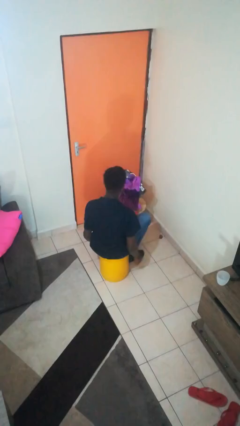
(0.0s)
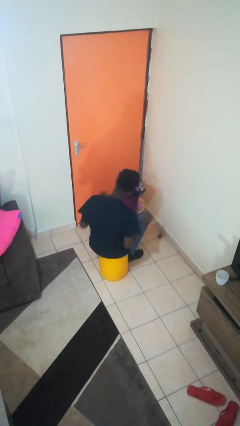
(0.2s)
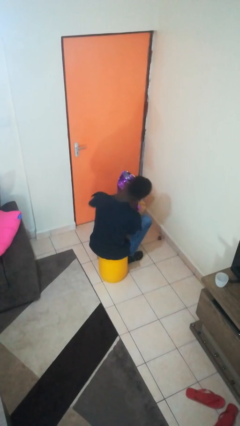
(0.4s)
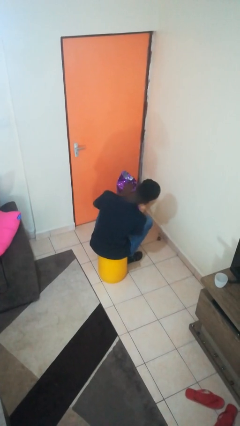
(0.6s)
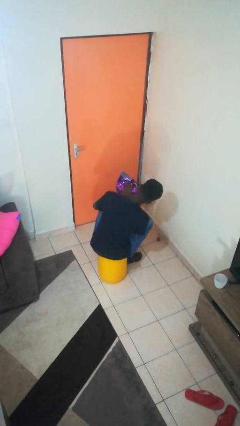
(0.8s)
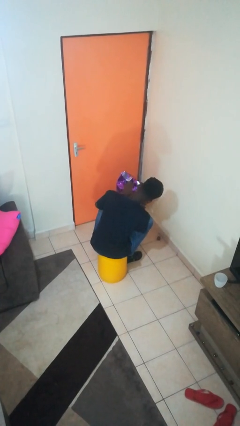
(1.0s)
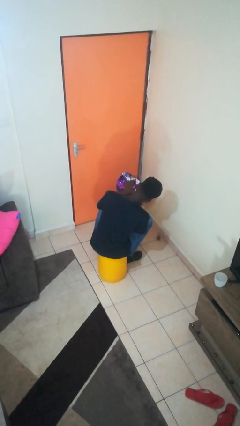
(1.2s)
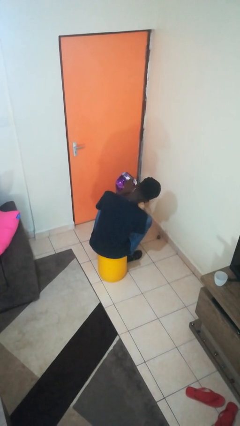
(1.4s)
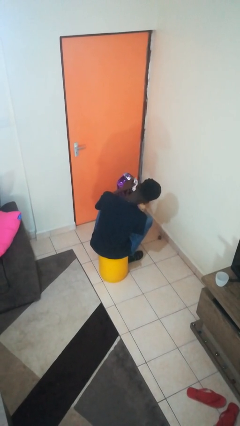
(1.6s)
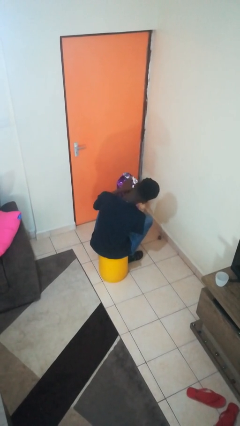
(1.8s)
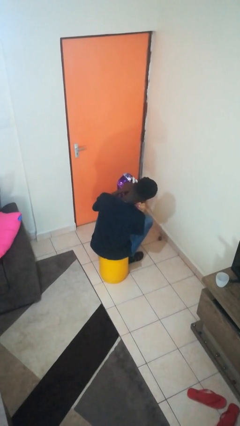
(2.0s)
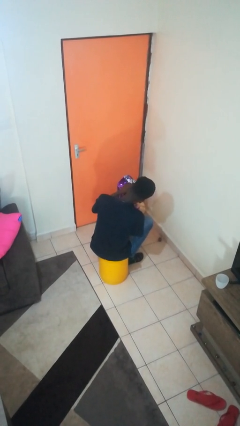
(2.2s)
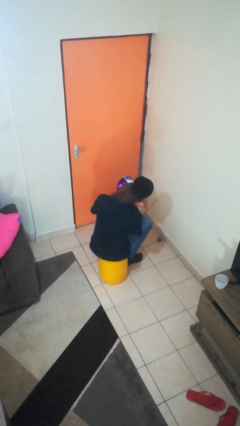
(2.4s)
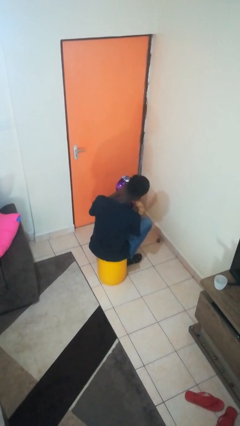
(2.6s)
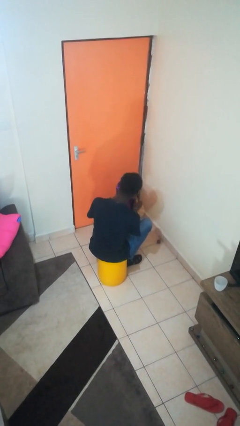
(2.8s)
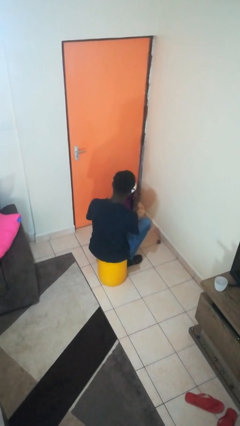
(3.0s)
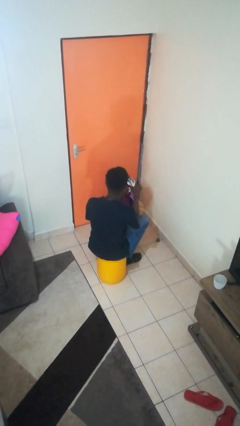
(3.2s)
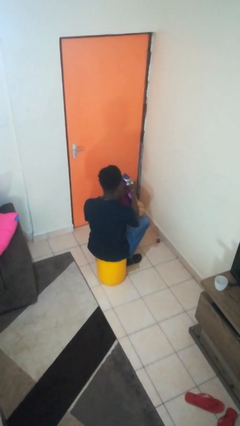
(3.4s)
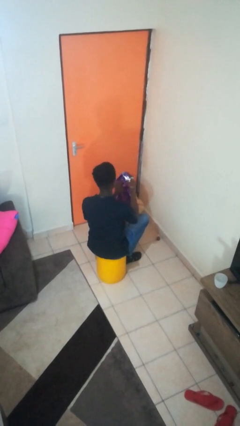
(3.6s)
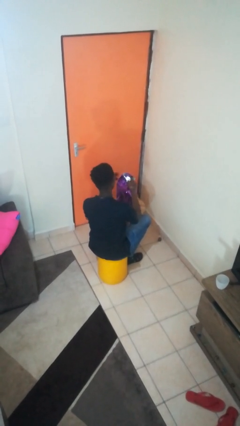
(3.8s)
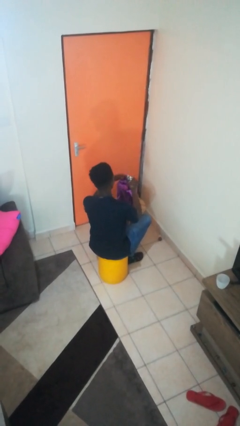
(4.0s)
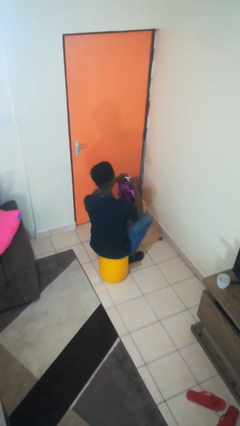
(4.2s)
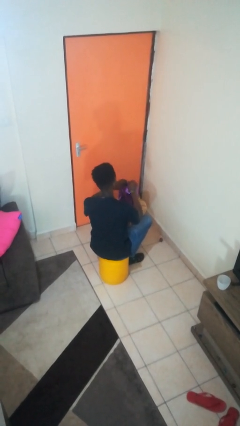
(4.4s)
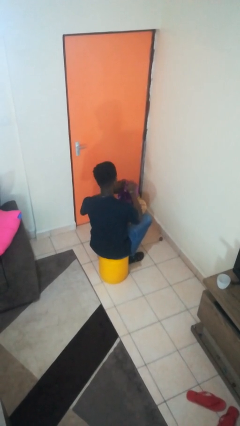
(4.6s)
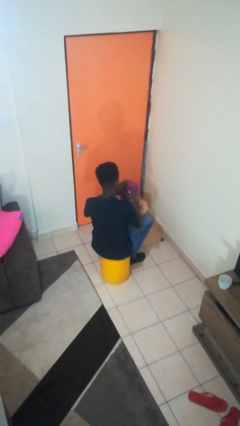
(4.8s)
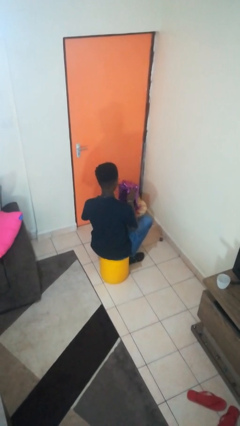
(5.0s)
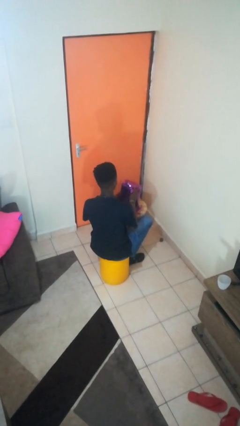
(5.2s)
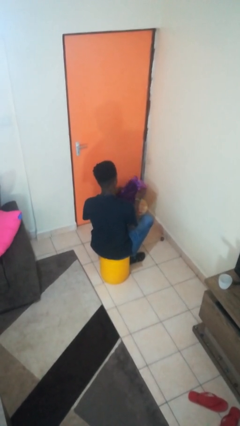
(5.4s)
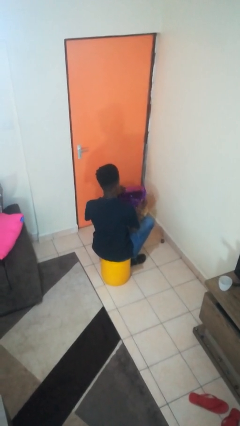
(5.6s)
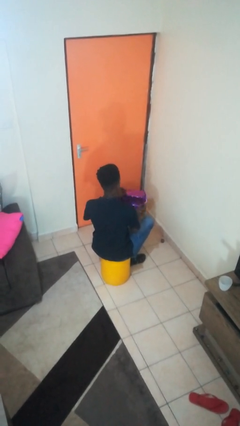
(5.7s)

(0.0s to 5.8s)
person wraps box

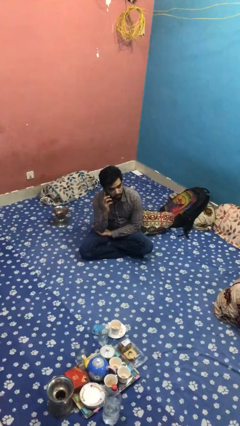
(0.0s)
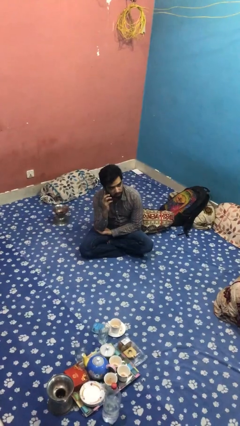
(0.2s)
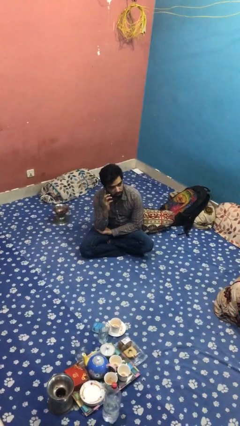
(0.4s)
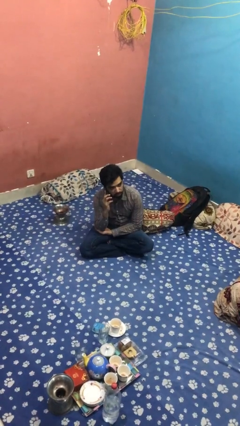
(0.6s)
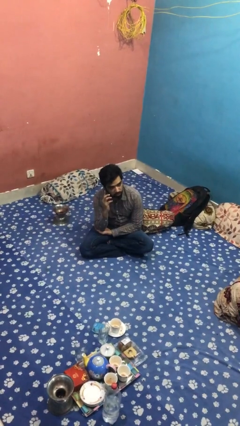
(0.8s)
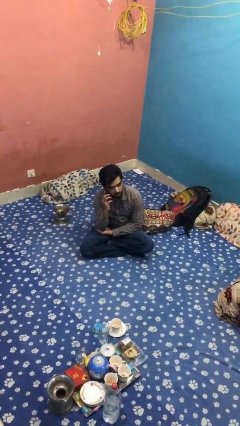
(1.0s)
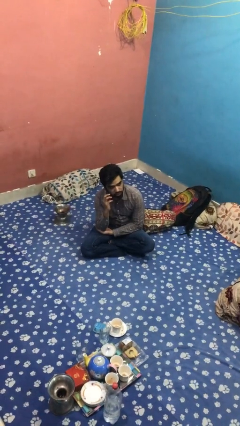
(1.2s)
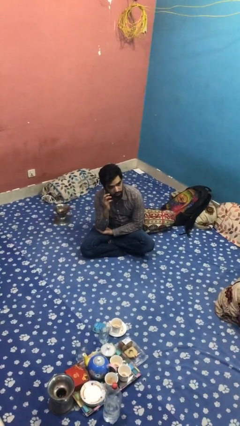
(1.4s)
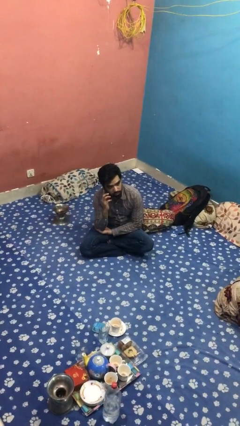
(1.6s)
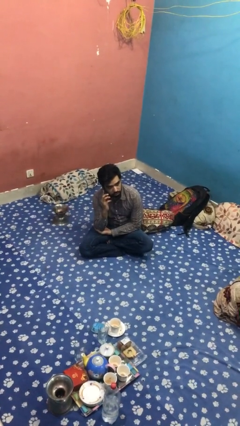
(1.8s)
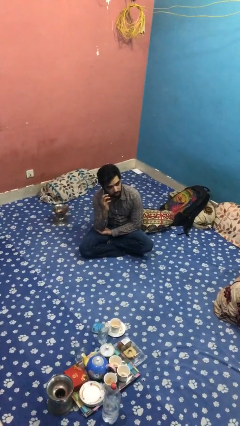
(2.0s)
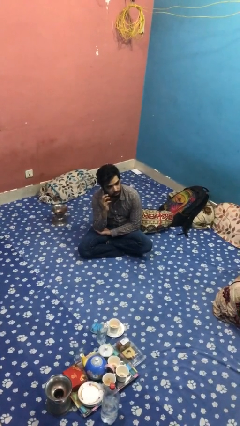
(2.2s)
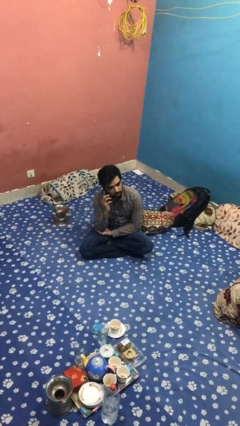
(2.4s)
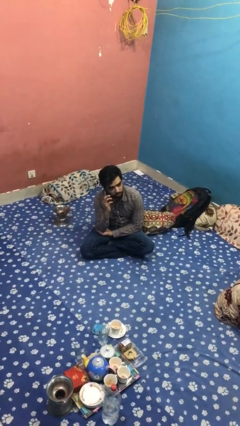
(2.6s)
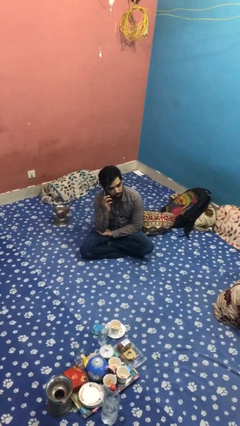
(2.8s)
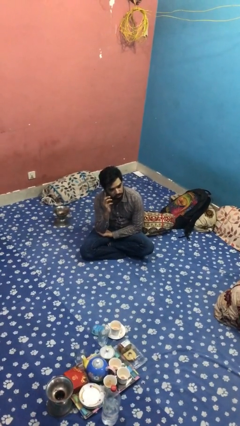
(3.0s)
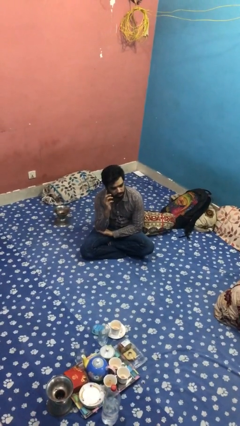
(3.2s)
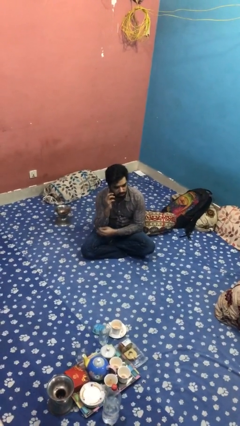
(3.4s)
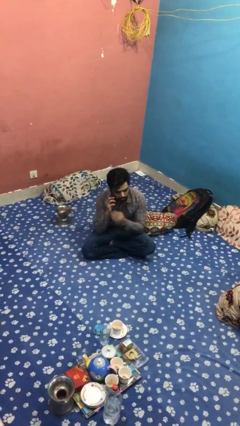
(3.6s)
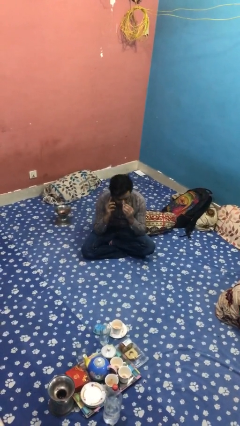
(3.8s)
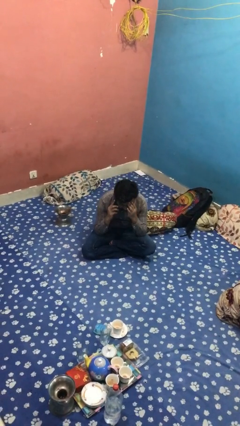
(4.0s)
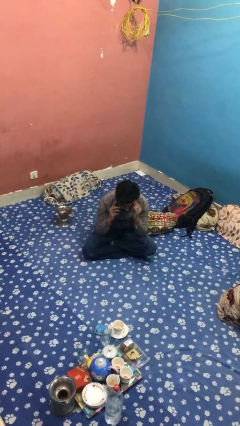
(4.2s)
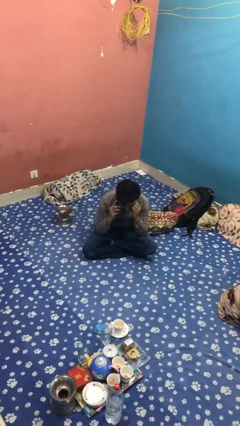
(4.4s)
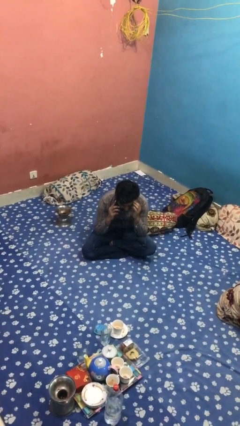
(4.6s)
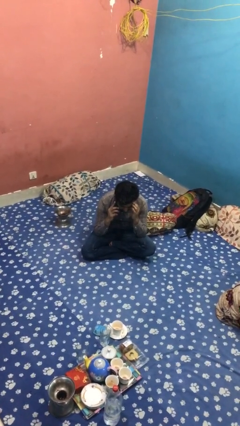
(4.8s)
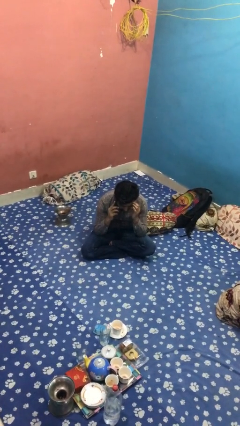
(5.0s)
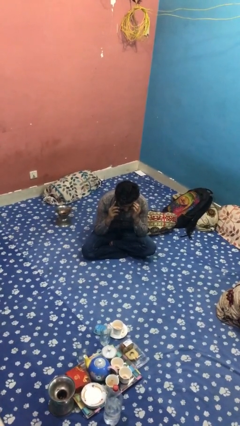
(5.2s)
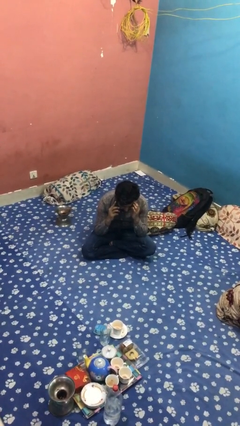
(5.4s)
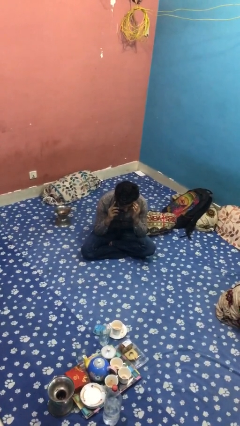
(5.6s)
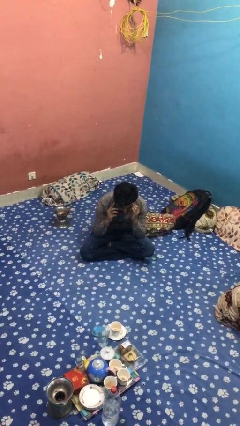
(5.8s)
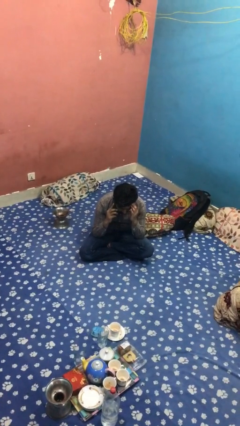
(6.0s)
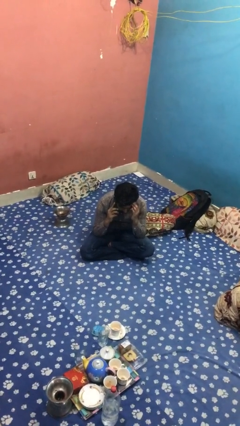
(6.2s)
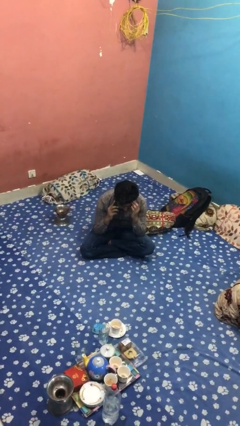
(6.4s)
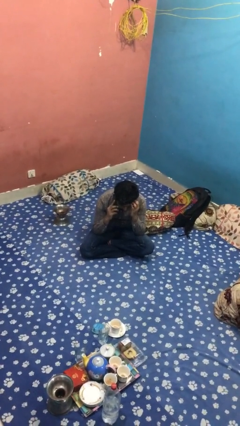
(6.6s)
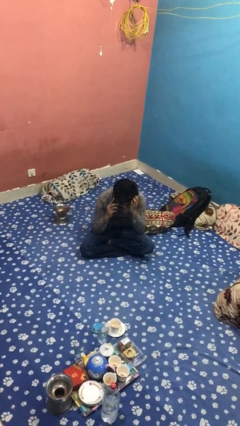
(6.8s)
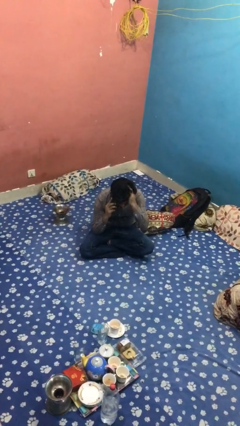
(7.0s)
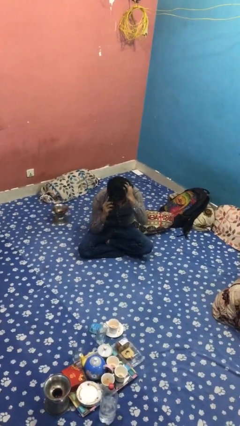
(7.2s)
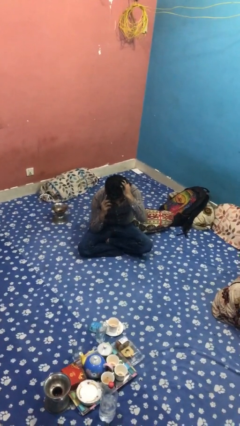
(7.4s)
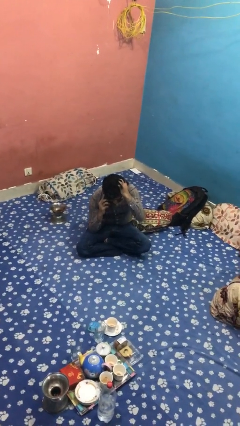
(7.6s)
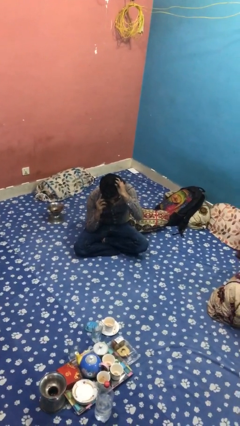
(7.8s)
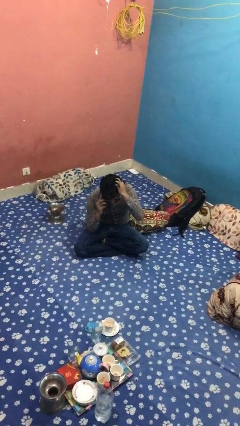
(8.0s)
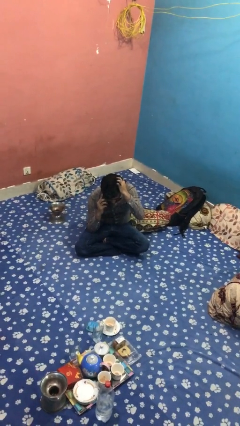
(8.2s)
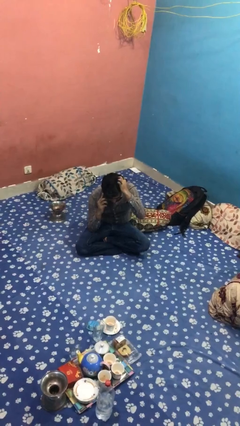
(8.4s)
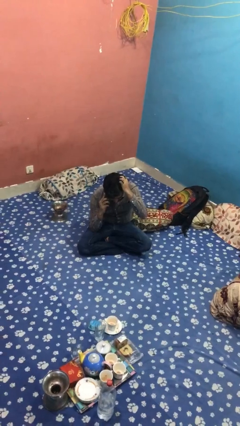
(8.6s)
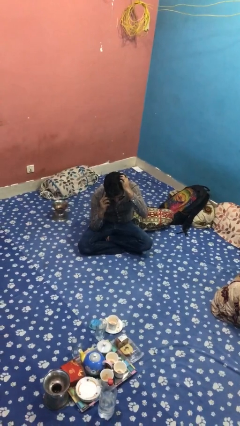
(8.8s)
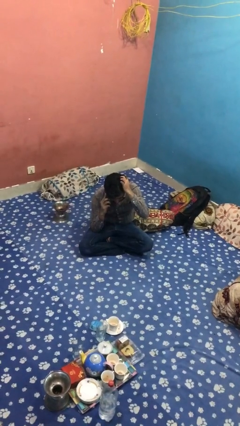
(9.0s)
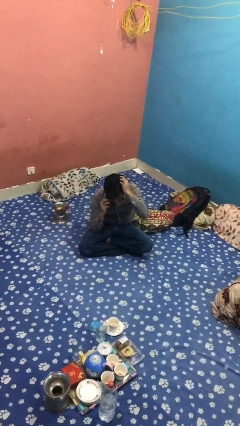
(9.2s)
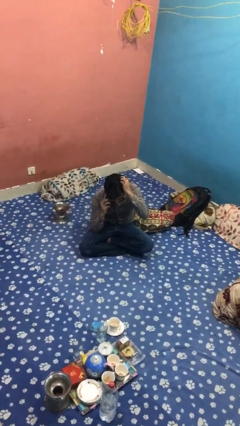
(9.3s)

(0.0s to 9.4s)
person talks on phone

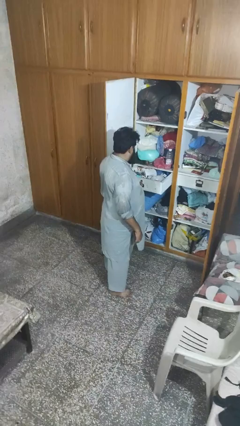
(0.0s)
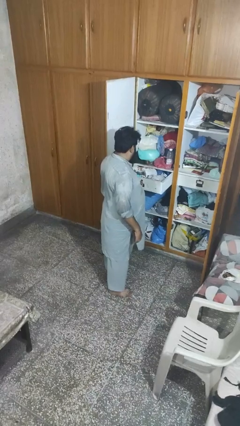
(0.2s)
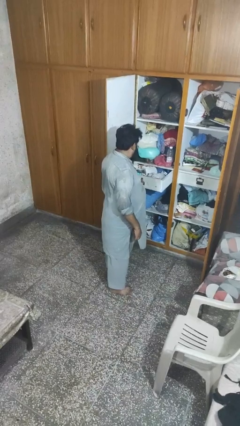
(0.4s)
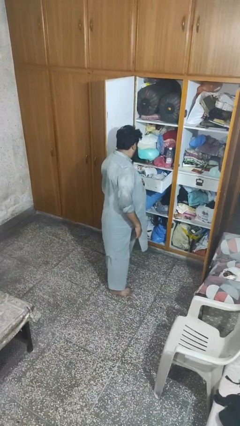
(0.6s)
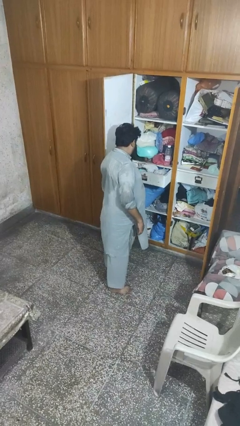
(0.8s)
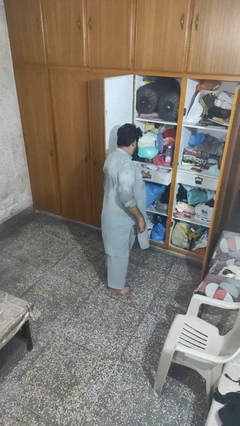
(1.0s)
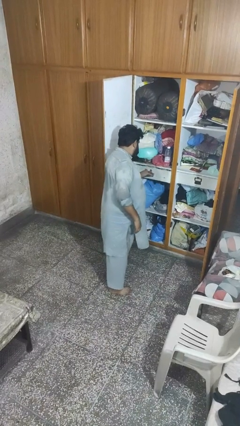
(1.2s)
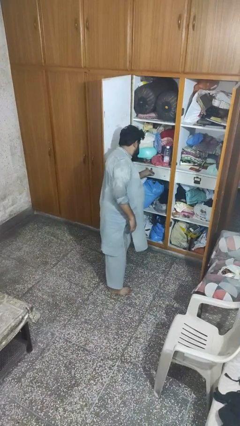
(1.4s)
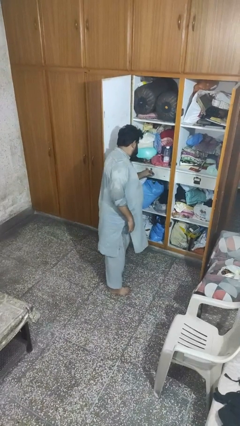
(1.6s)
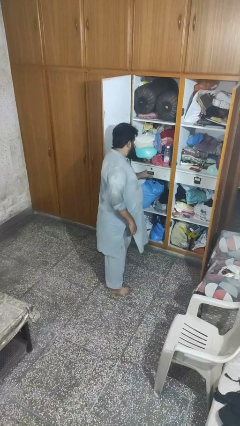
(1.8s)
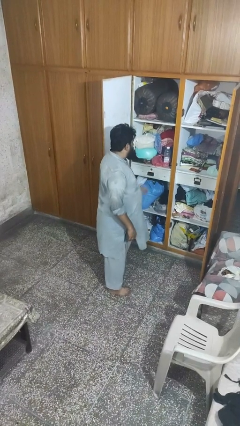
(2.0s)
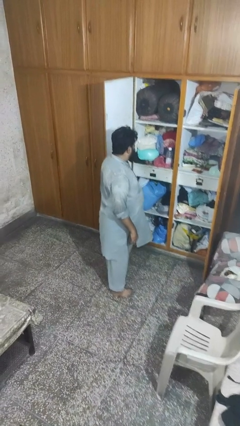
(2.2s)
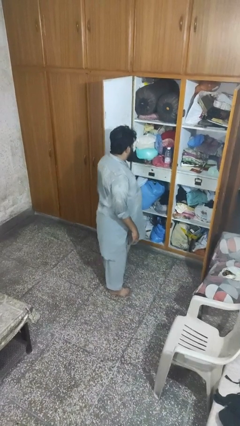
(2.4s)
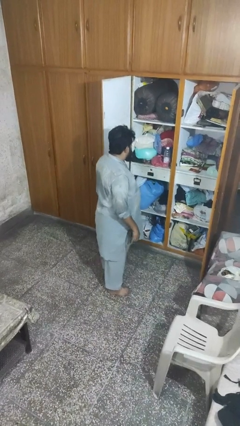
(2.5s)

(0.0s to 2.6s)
person closes dresser drawer

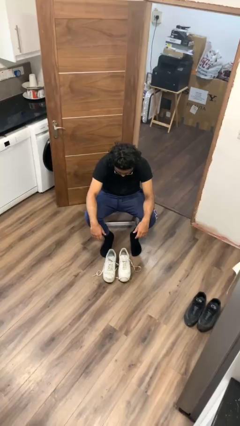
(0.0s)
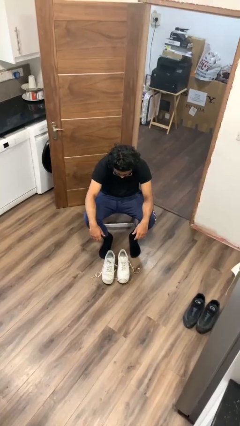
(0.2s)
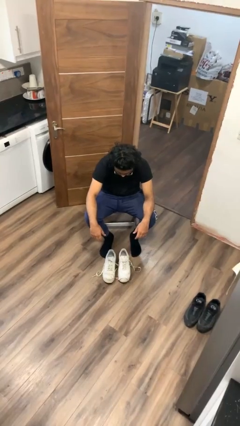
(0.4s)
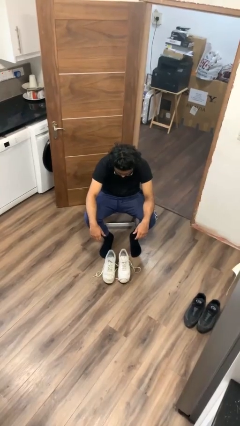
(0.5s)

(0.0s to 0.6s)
person puts on shoes
